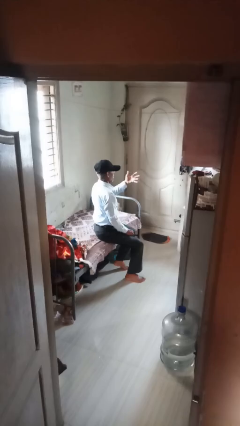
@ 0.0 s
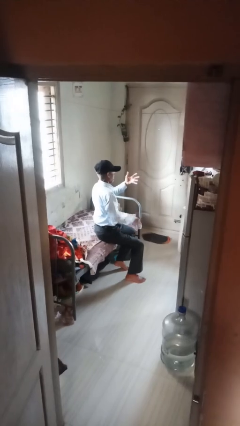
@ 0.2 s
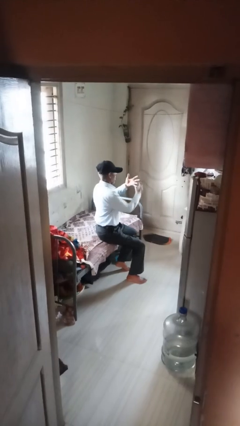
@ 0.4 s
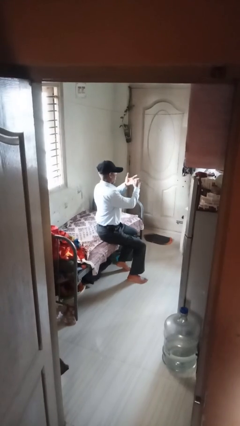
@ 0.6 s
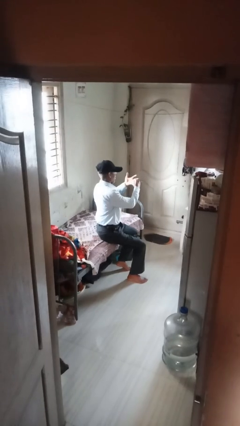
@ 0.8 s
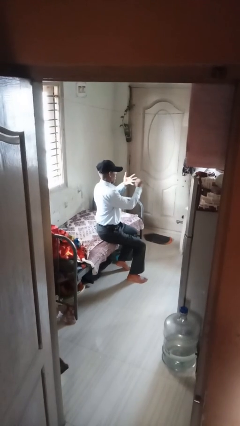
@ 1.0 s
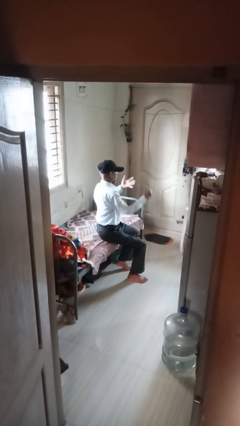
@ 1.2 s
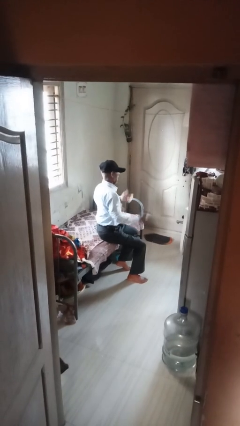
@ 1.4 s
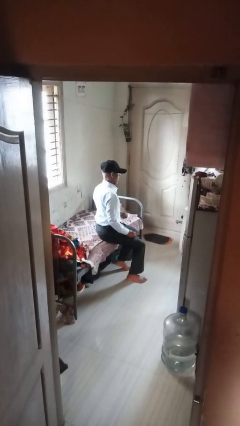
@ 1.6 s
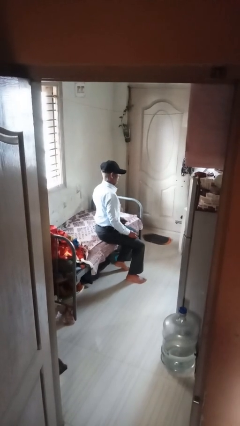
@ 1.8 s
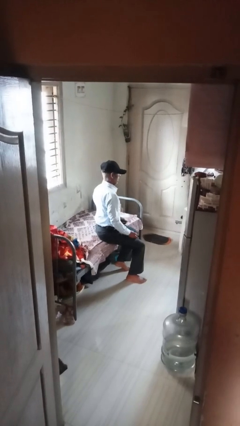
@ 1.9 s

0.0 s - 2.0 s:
person takes off ring

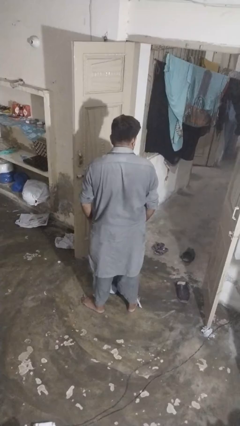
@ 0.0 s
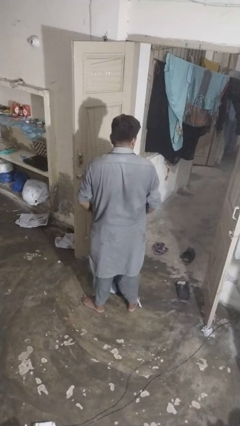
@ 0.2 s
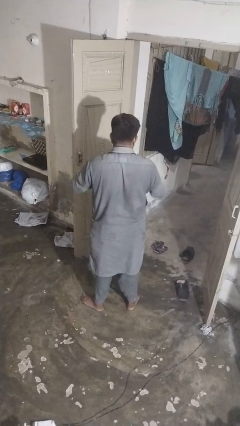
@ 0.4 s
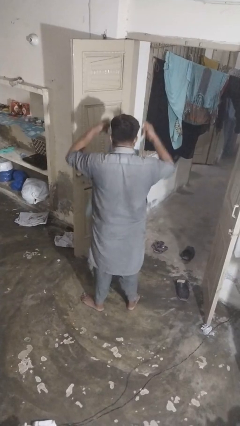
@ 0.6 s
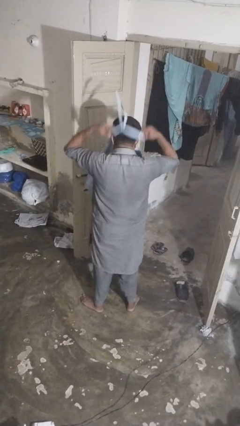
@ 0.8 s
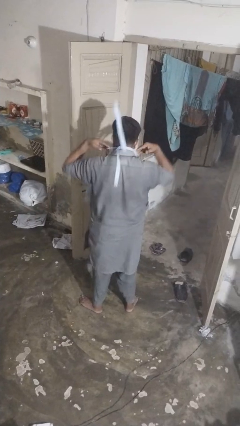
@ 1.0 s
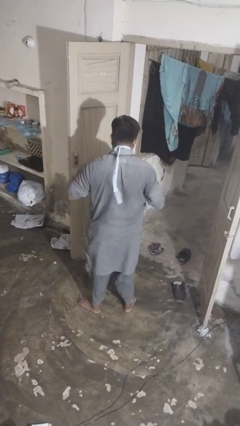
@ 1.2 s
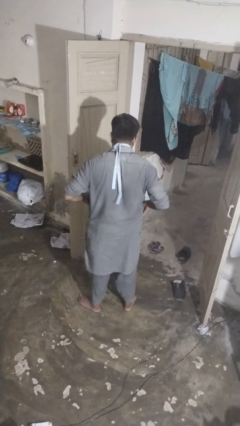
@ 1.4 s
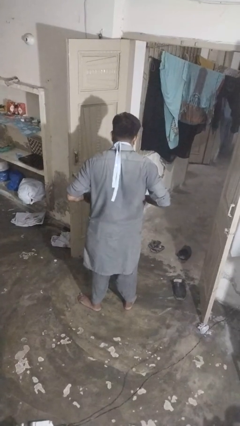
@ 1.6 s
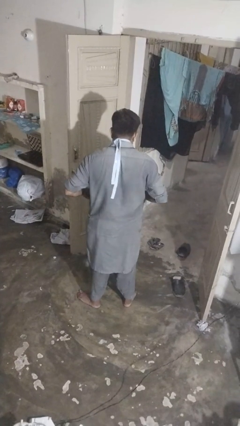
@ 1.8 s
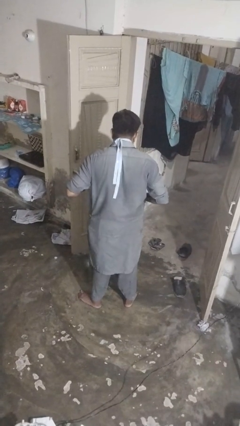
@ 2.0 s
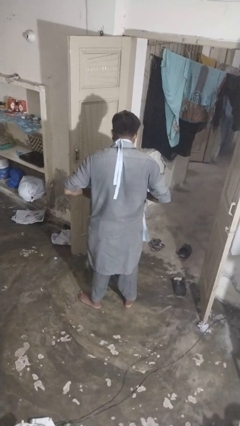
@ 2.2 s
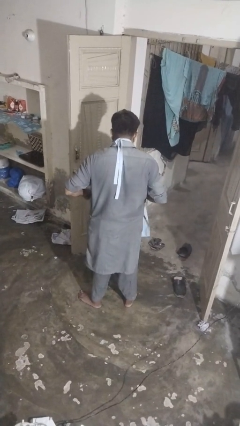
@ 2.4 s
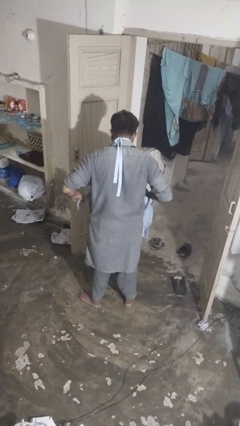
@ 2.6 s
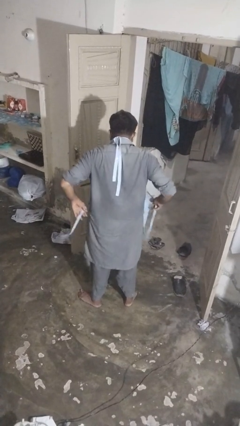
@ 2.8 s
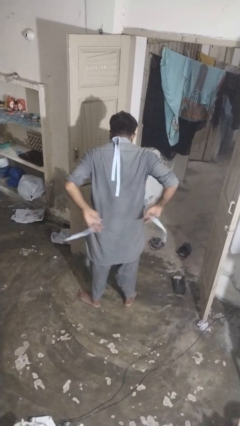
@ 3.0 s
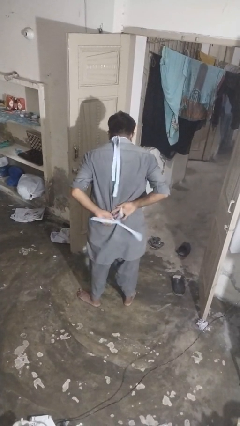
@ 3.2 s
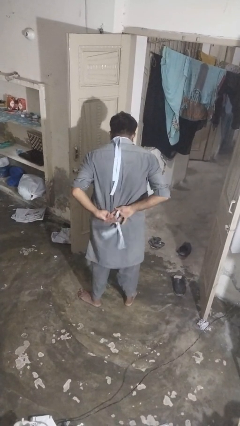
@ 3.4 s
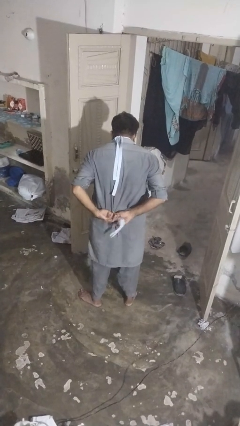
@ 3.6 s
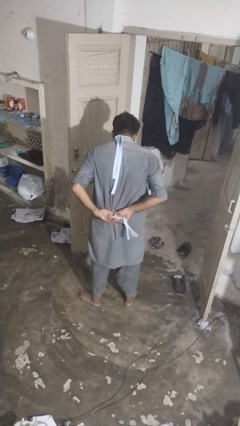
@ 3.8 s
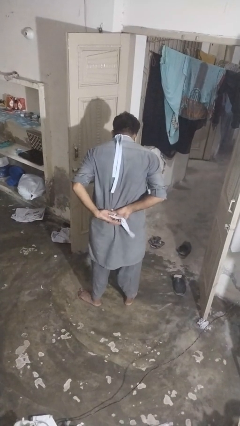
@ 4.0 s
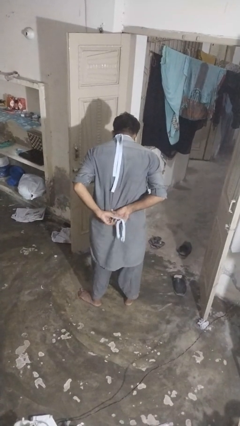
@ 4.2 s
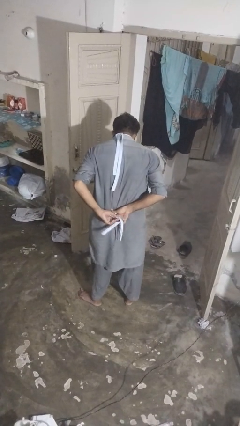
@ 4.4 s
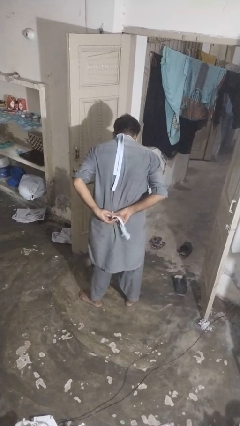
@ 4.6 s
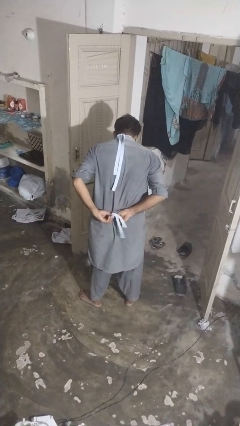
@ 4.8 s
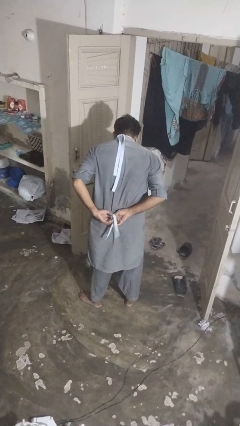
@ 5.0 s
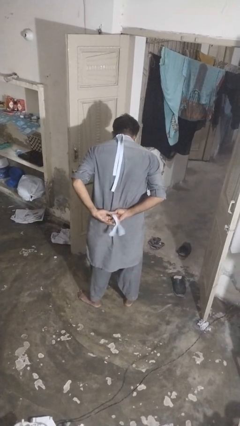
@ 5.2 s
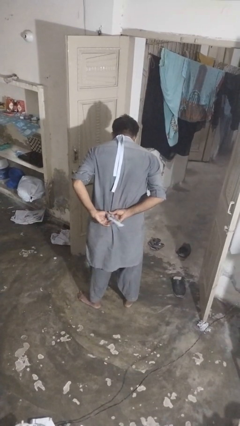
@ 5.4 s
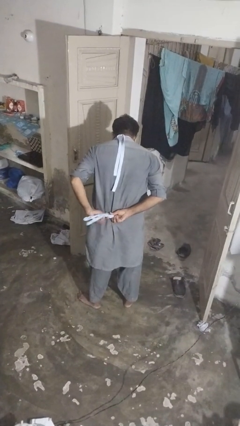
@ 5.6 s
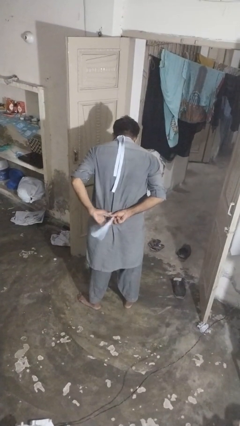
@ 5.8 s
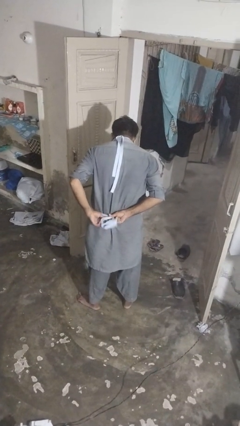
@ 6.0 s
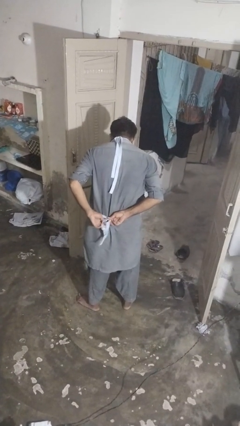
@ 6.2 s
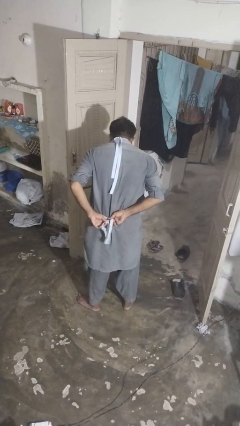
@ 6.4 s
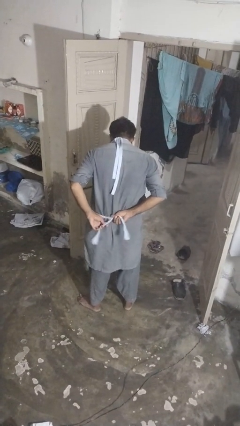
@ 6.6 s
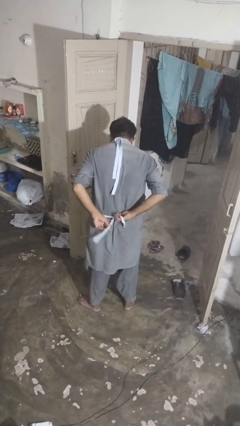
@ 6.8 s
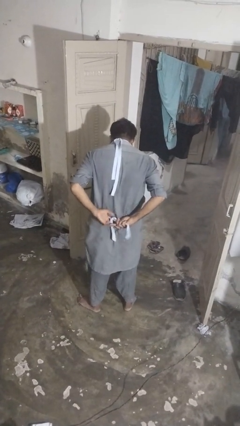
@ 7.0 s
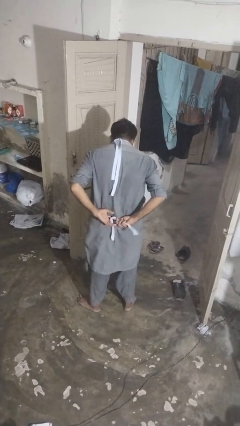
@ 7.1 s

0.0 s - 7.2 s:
person puts on apron

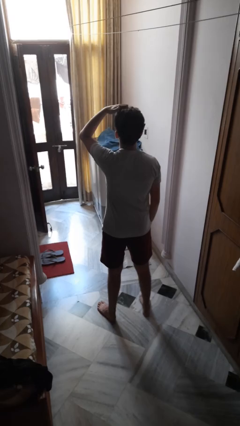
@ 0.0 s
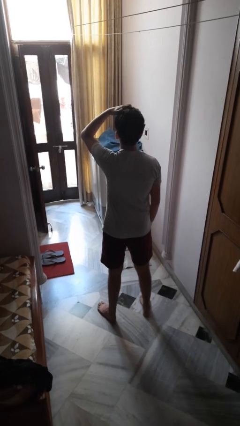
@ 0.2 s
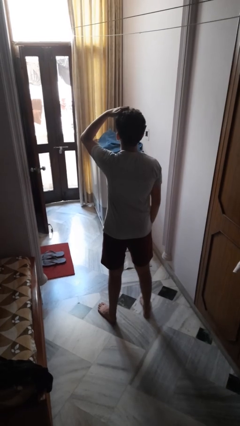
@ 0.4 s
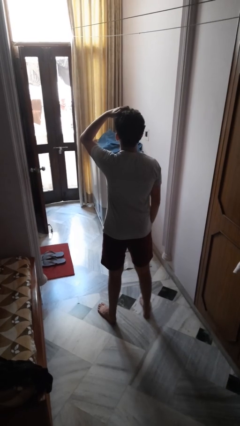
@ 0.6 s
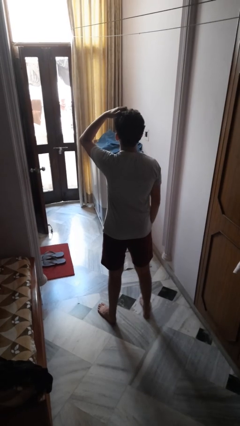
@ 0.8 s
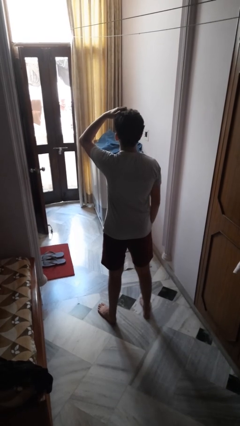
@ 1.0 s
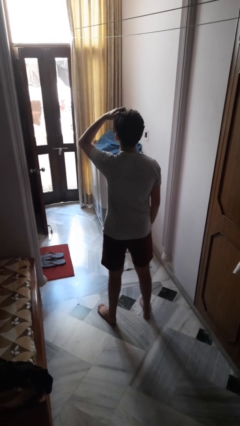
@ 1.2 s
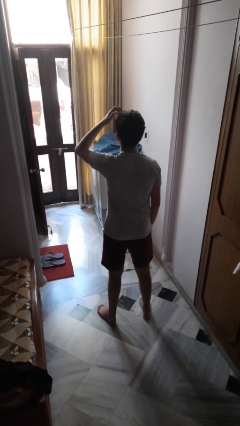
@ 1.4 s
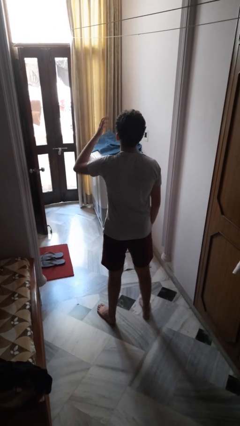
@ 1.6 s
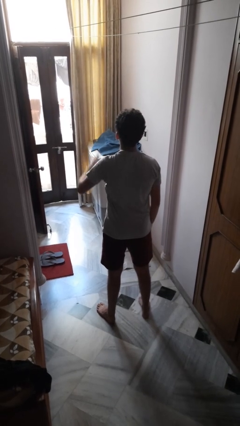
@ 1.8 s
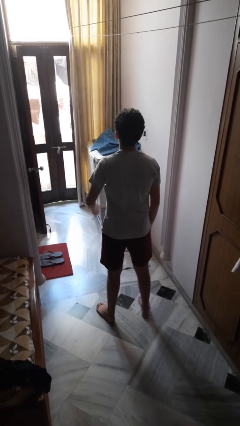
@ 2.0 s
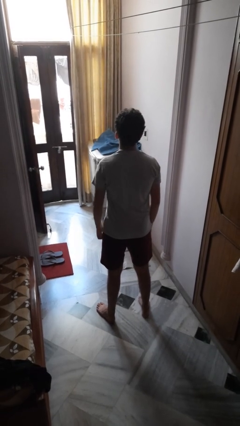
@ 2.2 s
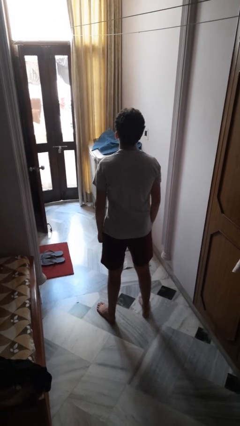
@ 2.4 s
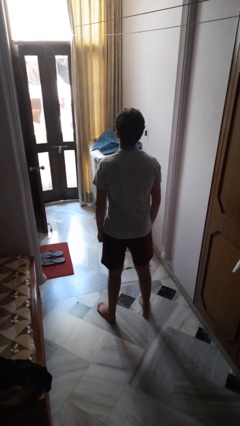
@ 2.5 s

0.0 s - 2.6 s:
person scratches face

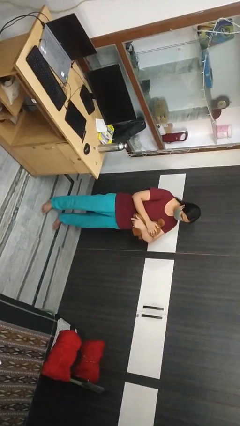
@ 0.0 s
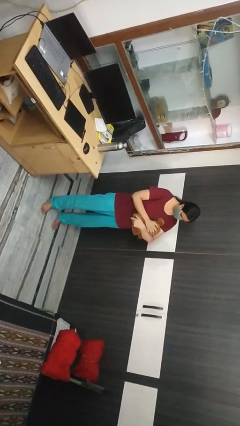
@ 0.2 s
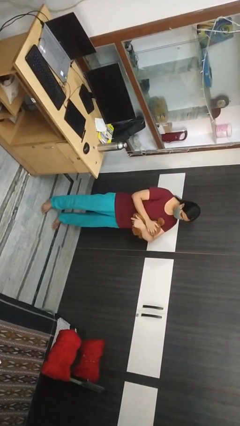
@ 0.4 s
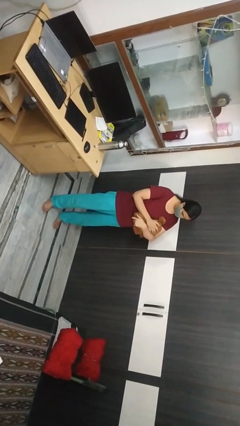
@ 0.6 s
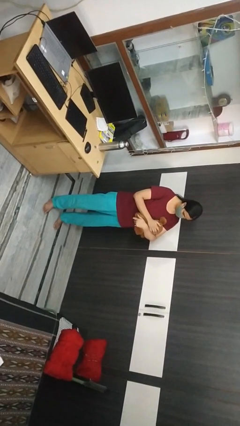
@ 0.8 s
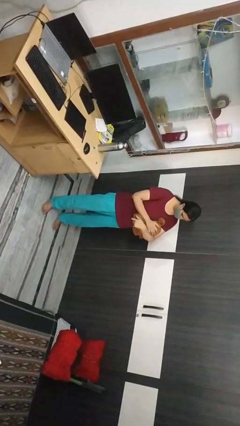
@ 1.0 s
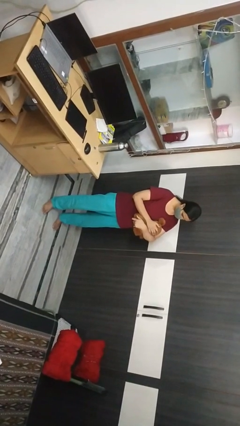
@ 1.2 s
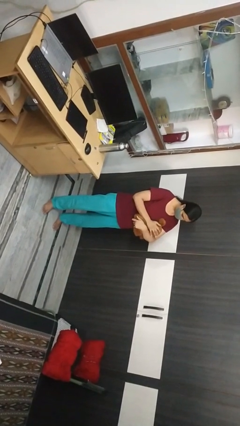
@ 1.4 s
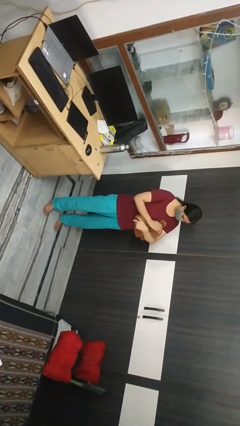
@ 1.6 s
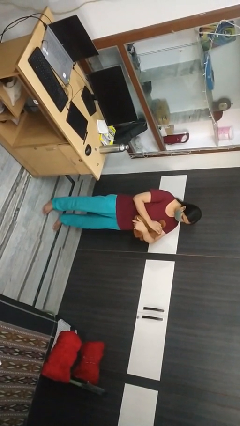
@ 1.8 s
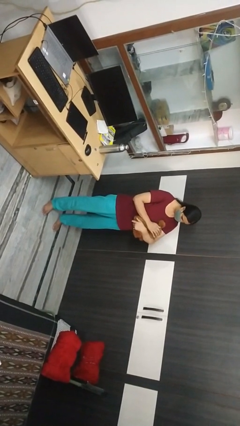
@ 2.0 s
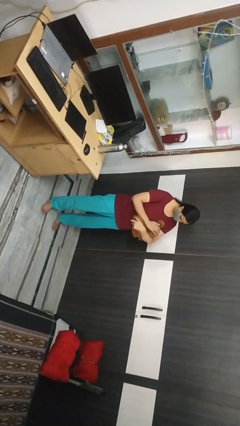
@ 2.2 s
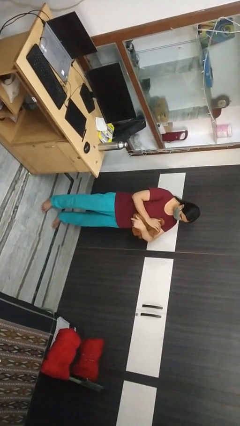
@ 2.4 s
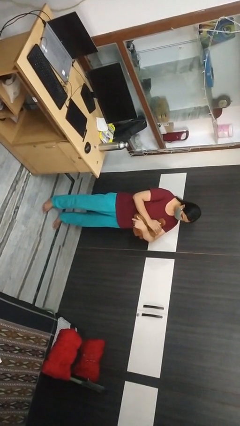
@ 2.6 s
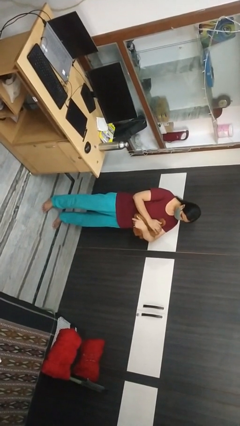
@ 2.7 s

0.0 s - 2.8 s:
person pets cat

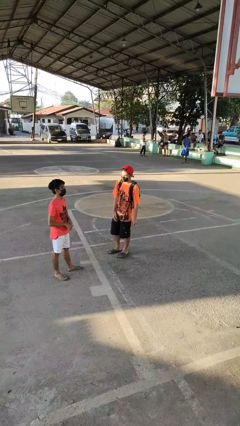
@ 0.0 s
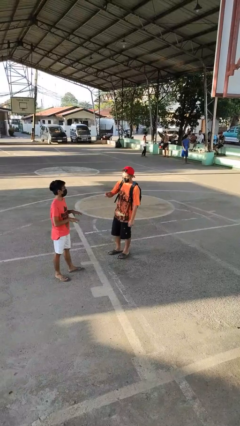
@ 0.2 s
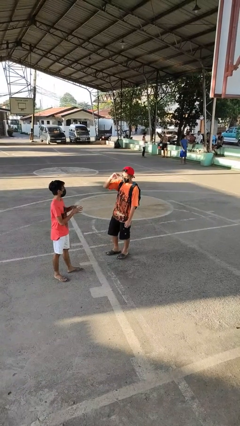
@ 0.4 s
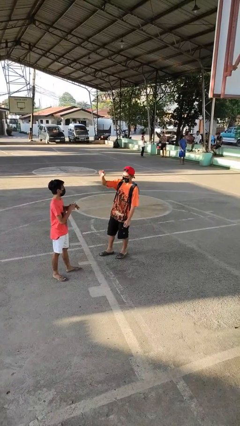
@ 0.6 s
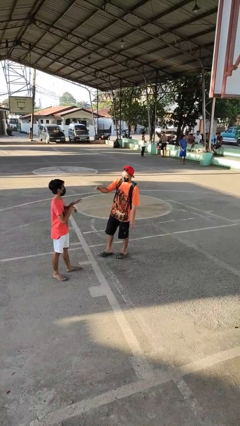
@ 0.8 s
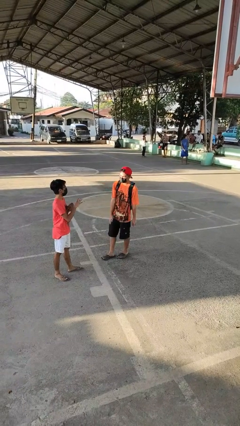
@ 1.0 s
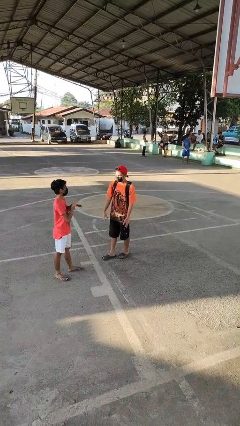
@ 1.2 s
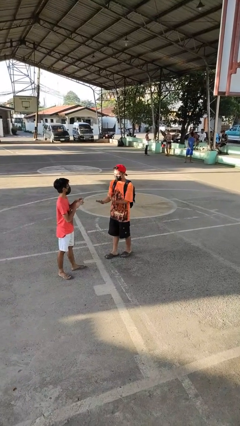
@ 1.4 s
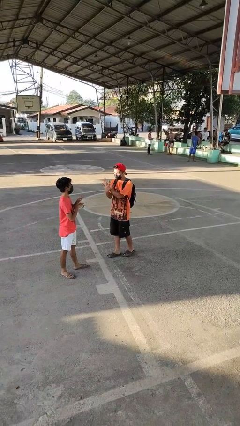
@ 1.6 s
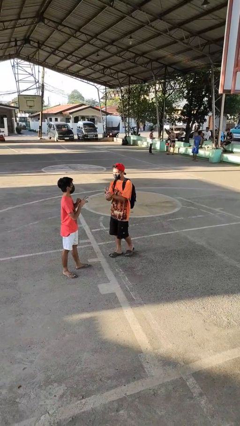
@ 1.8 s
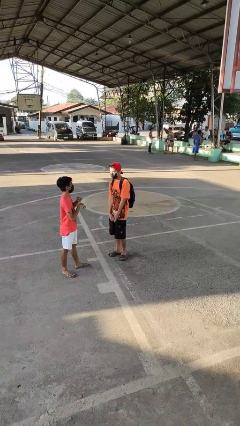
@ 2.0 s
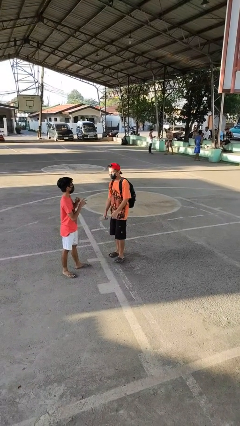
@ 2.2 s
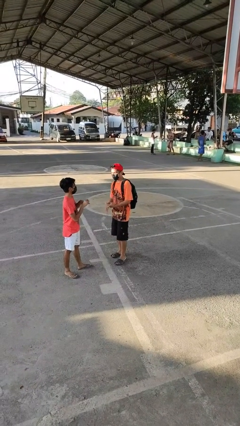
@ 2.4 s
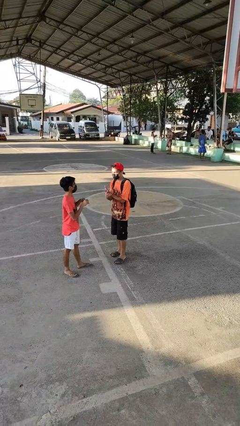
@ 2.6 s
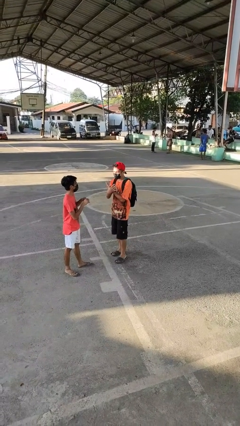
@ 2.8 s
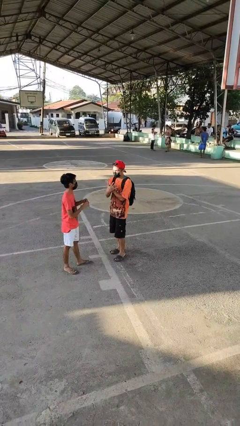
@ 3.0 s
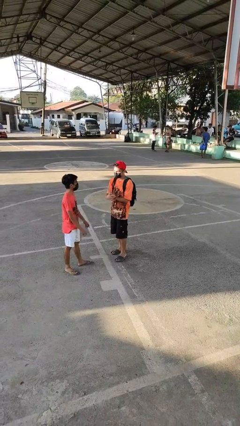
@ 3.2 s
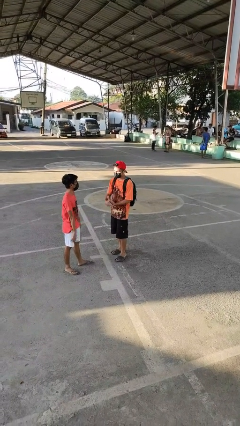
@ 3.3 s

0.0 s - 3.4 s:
person talks to person
